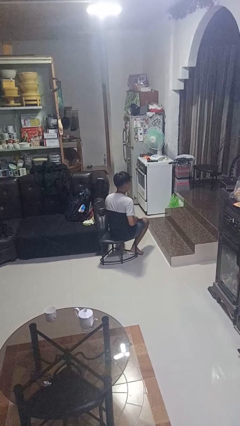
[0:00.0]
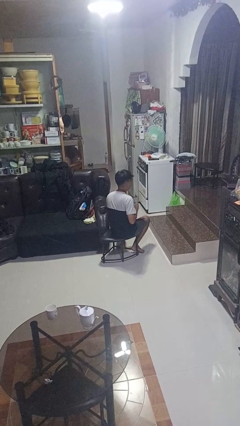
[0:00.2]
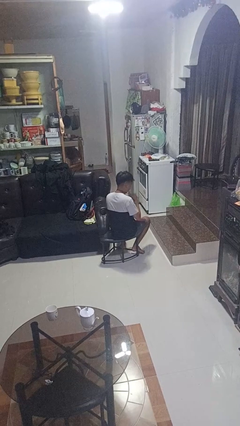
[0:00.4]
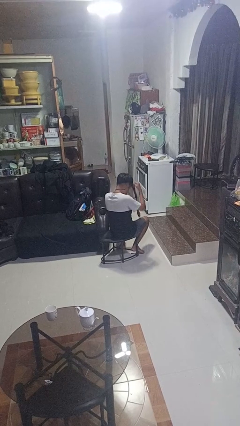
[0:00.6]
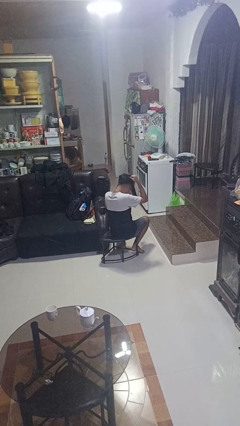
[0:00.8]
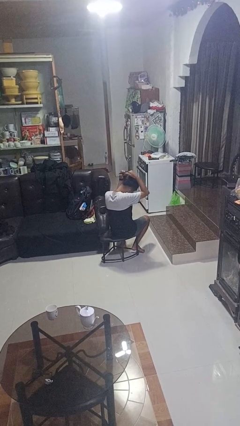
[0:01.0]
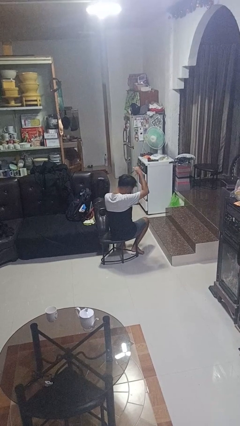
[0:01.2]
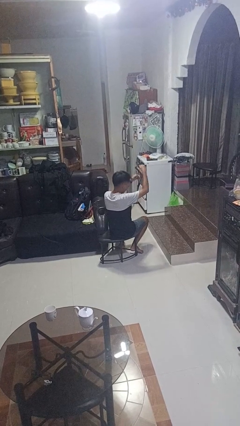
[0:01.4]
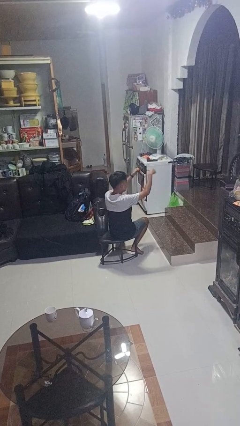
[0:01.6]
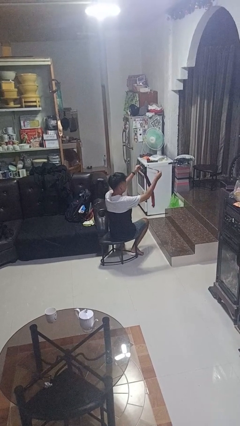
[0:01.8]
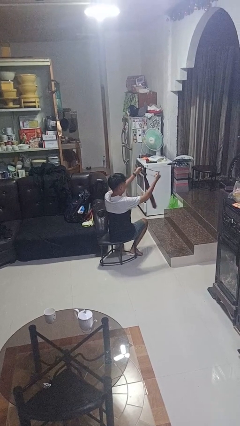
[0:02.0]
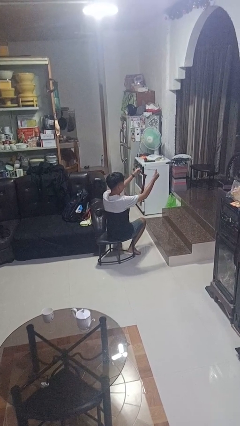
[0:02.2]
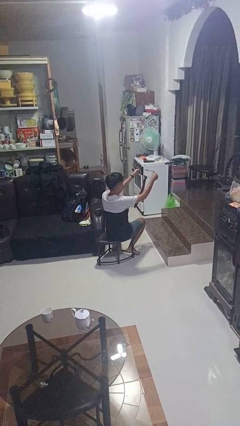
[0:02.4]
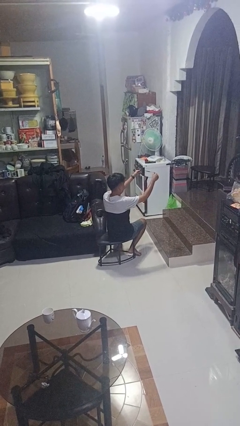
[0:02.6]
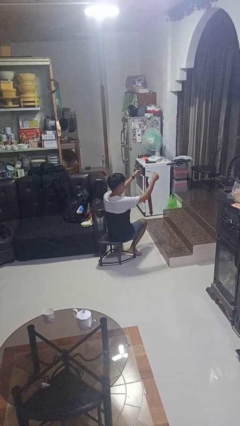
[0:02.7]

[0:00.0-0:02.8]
person takes off necktie

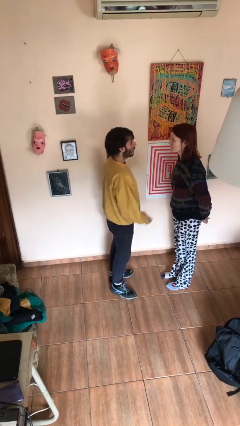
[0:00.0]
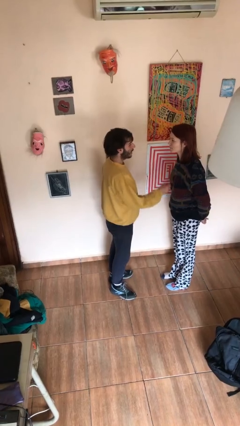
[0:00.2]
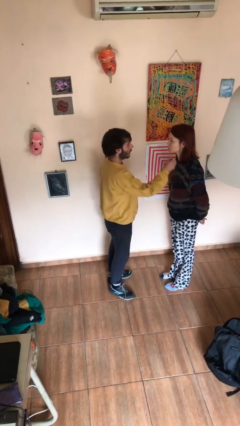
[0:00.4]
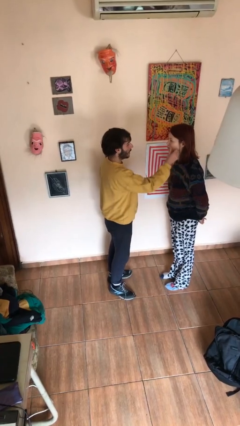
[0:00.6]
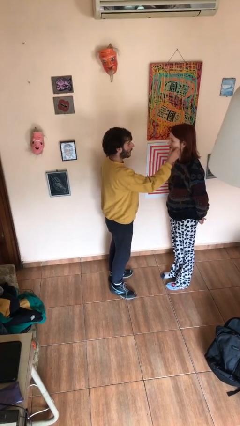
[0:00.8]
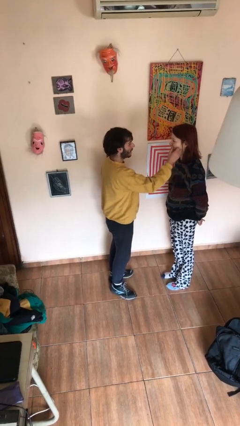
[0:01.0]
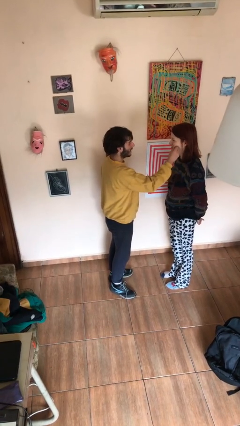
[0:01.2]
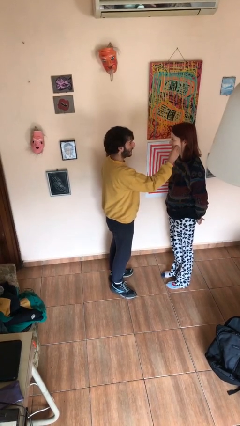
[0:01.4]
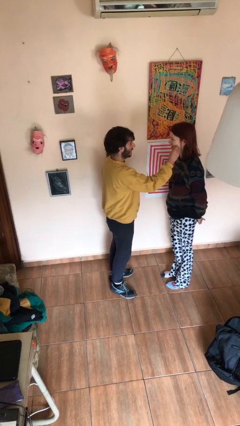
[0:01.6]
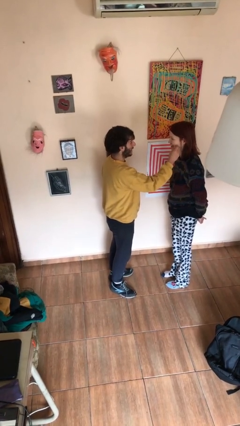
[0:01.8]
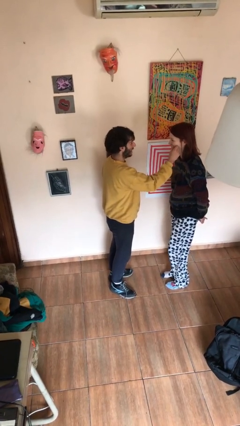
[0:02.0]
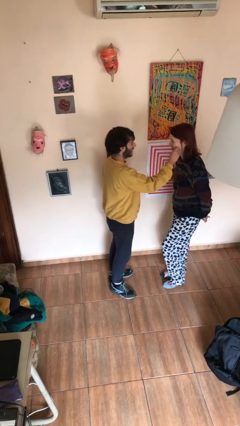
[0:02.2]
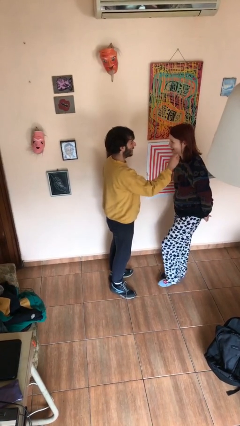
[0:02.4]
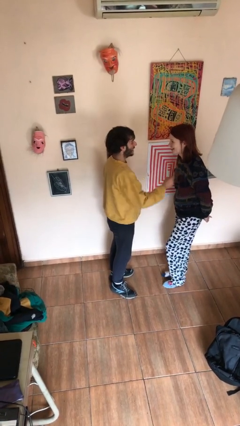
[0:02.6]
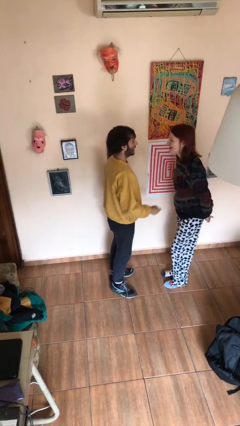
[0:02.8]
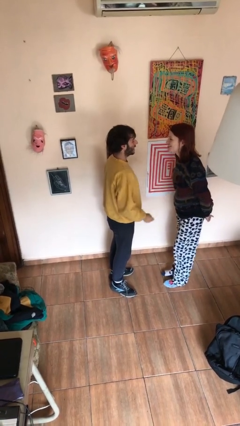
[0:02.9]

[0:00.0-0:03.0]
person touches face of person

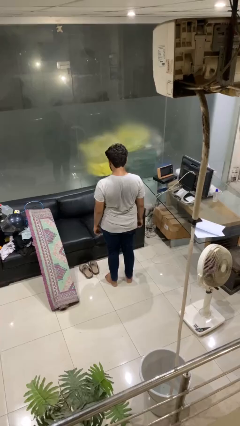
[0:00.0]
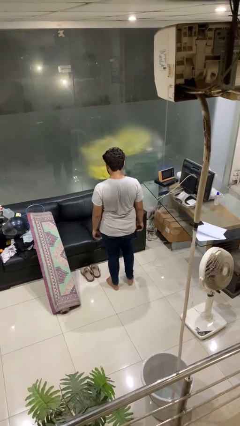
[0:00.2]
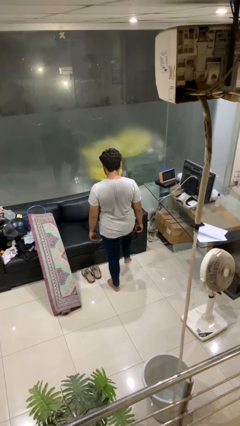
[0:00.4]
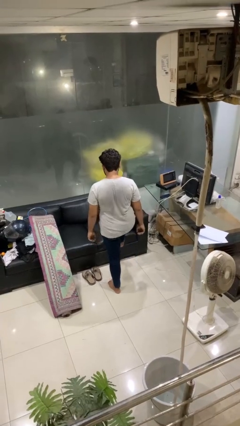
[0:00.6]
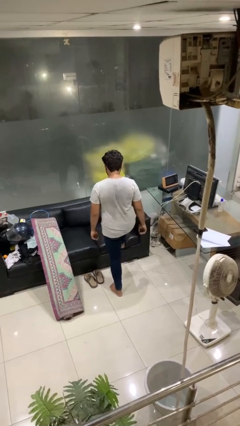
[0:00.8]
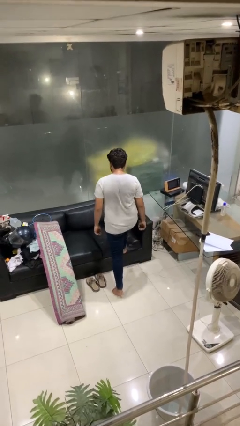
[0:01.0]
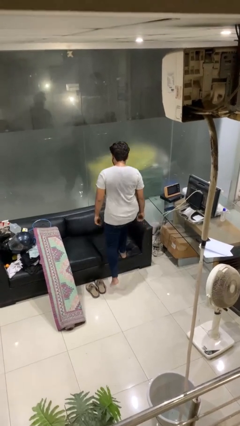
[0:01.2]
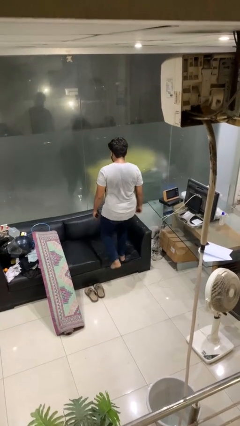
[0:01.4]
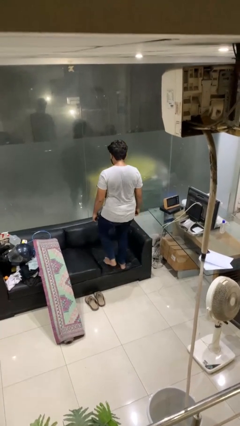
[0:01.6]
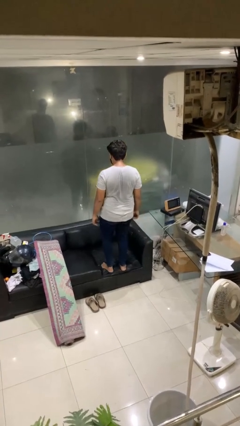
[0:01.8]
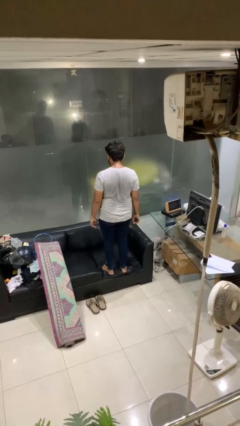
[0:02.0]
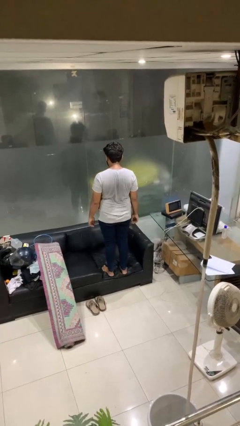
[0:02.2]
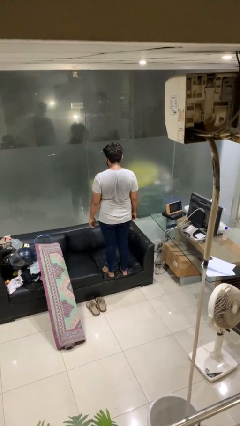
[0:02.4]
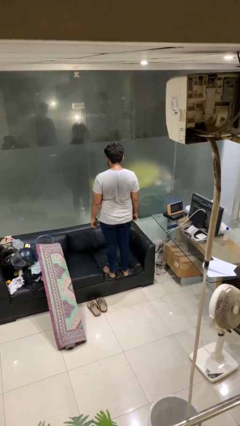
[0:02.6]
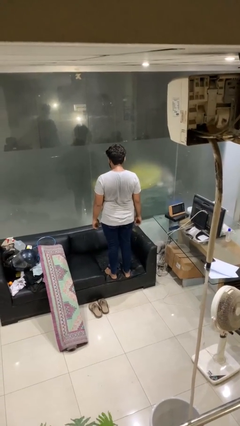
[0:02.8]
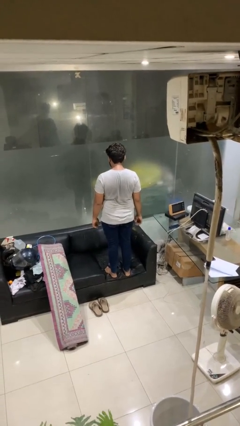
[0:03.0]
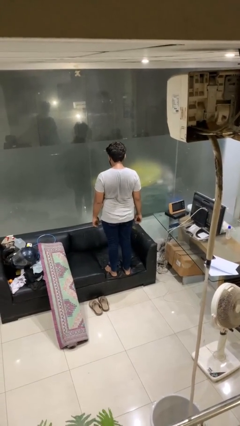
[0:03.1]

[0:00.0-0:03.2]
person climbs on couch

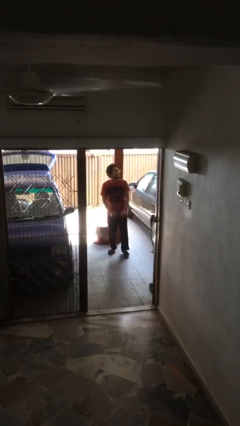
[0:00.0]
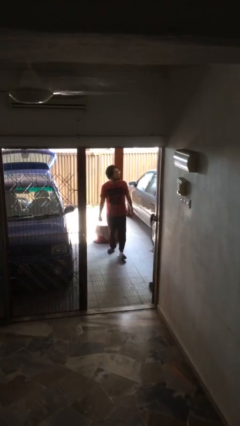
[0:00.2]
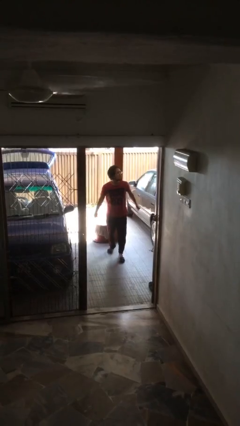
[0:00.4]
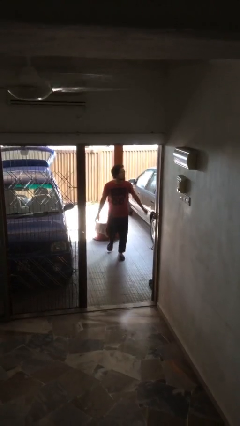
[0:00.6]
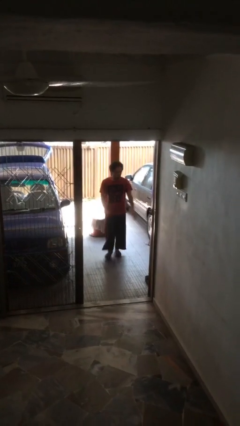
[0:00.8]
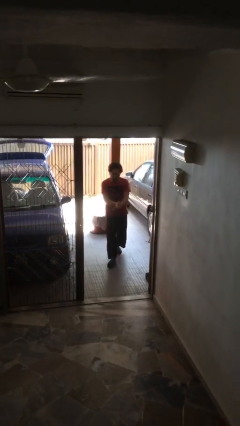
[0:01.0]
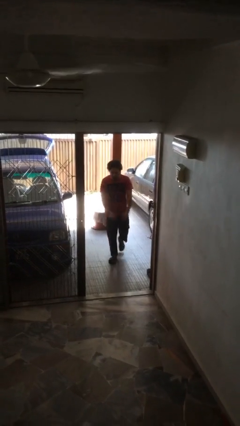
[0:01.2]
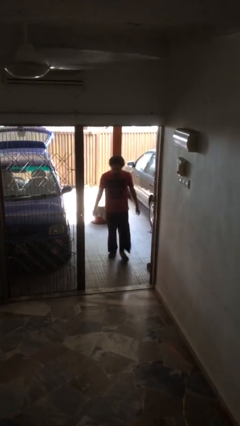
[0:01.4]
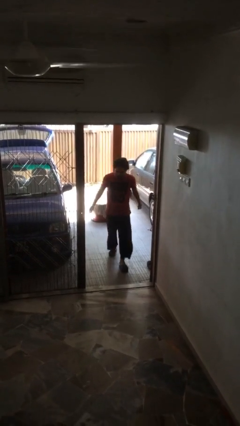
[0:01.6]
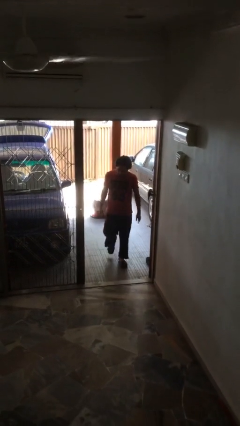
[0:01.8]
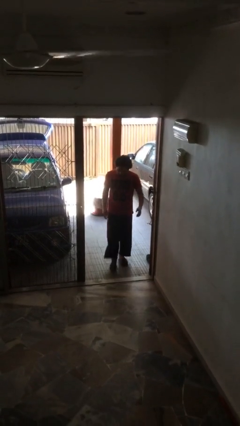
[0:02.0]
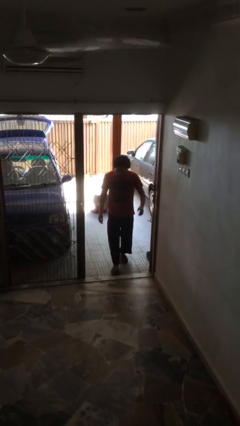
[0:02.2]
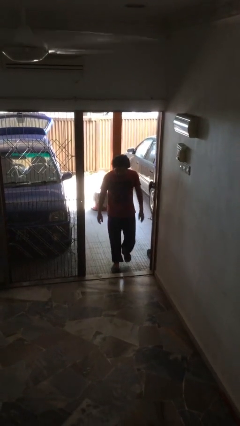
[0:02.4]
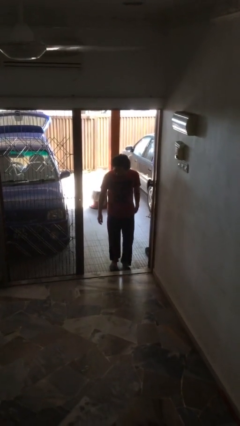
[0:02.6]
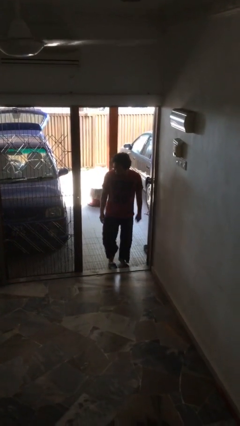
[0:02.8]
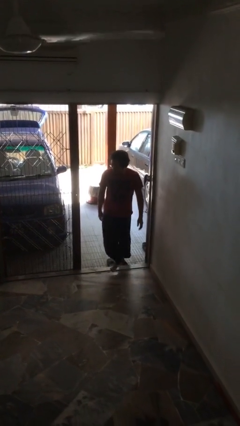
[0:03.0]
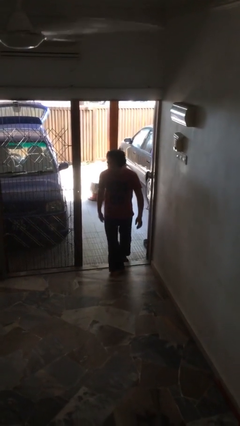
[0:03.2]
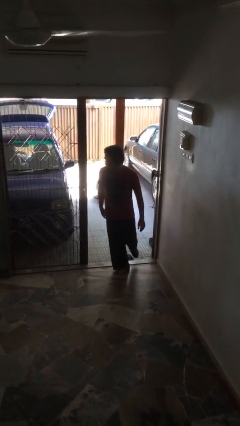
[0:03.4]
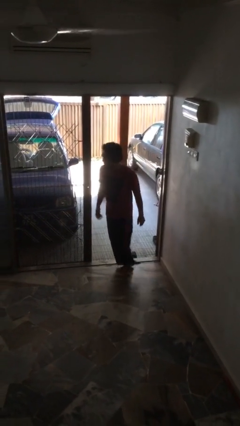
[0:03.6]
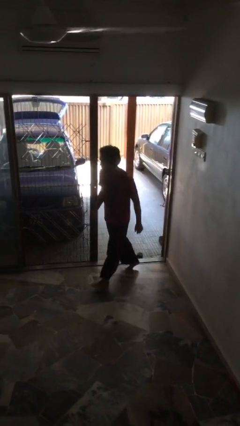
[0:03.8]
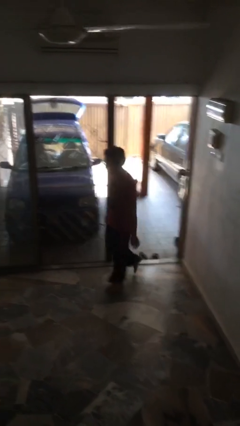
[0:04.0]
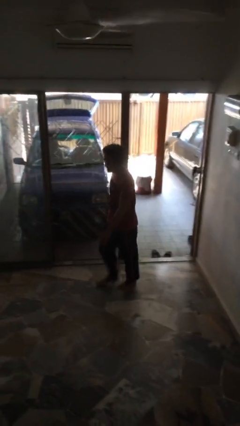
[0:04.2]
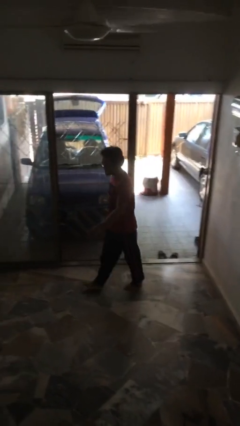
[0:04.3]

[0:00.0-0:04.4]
person enters scene through structure

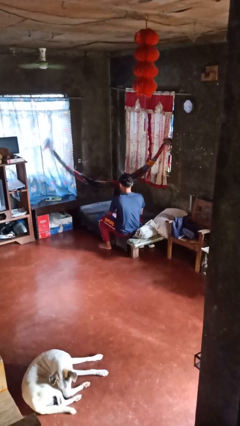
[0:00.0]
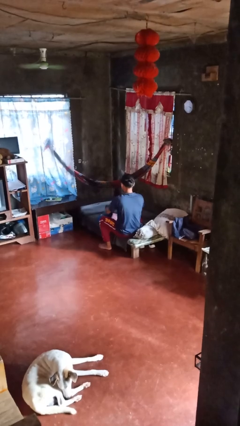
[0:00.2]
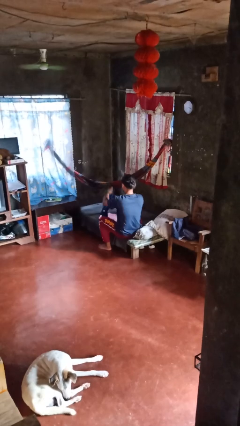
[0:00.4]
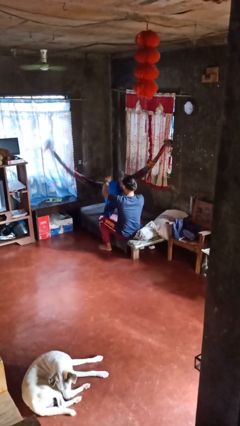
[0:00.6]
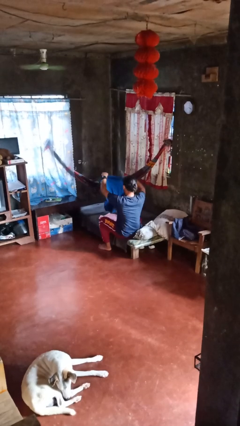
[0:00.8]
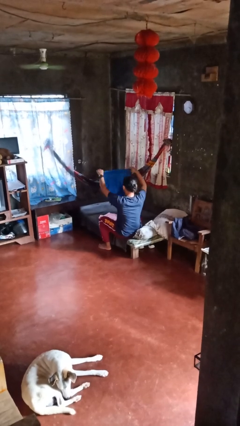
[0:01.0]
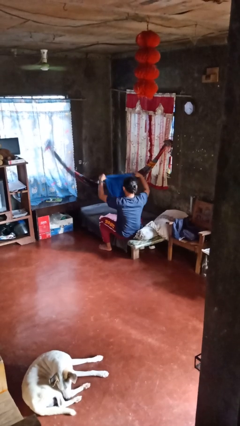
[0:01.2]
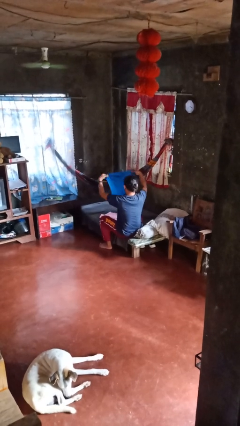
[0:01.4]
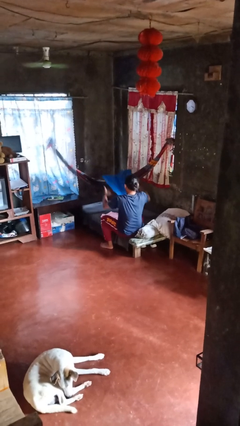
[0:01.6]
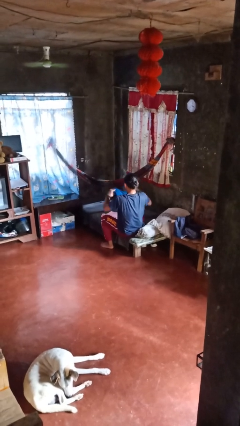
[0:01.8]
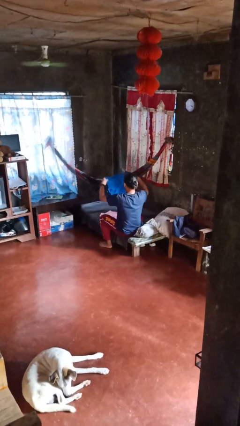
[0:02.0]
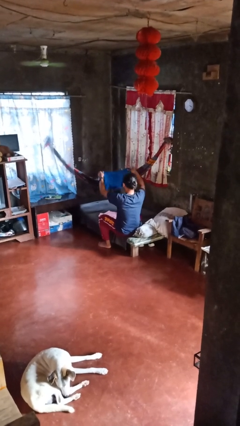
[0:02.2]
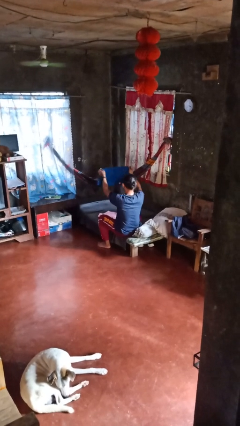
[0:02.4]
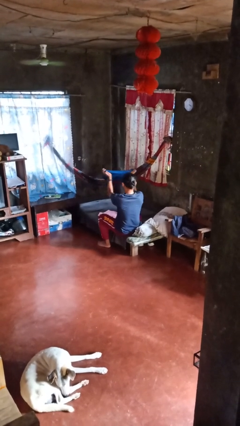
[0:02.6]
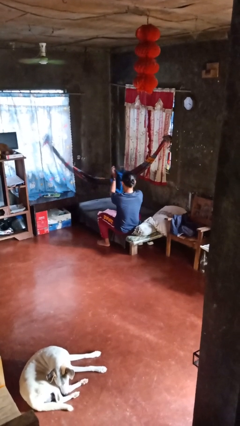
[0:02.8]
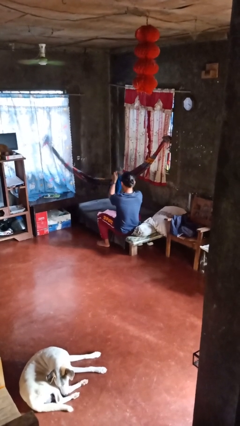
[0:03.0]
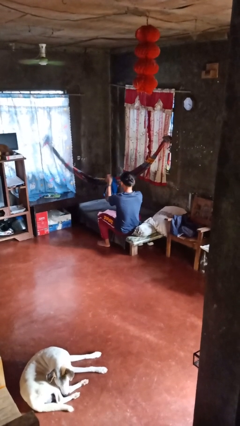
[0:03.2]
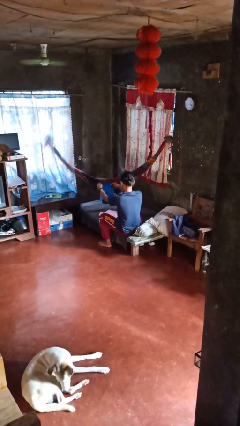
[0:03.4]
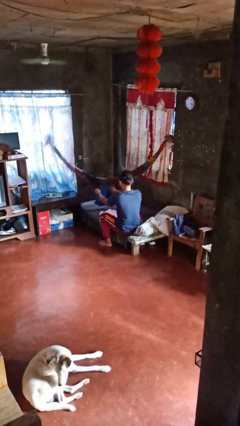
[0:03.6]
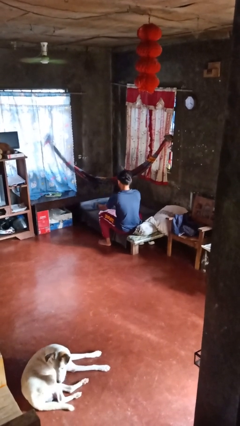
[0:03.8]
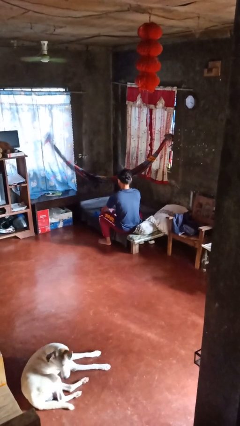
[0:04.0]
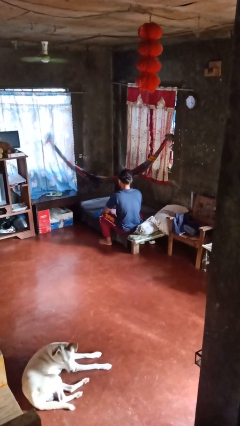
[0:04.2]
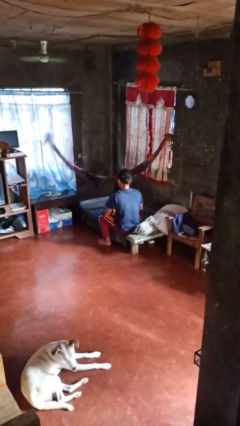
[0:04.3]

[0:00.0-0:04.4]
person folds shirt
